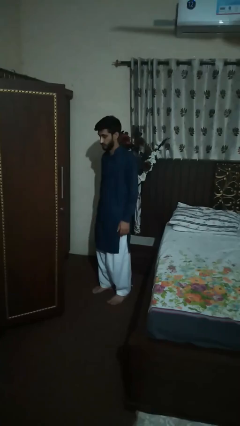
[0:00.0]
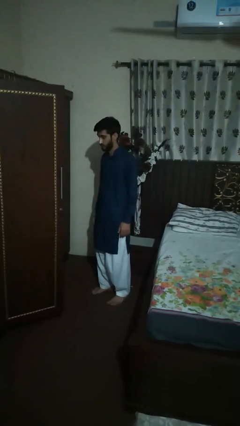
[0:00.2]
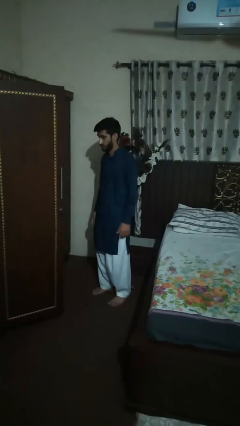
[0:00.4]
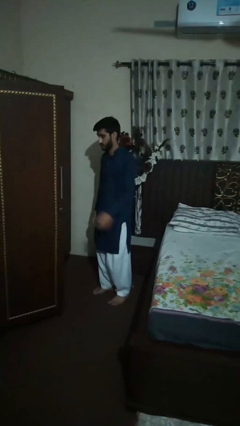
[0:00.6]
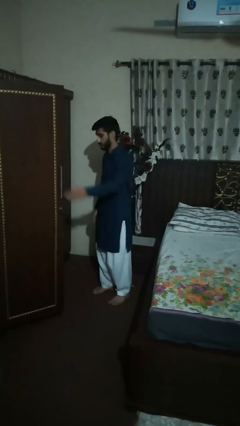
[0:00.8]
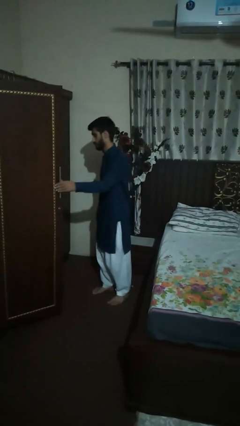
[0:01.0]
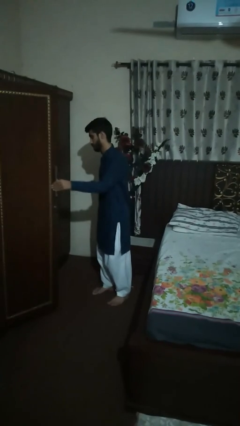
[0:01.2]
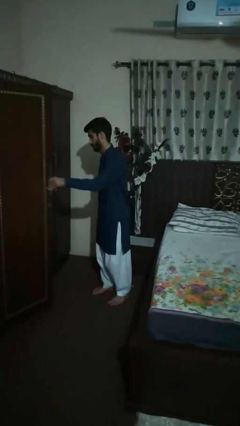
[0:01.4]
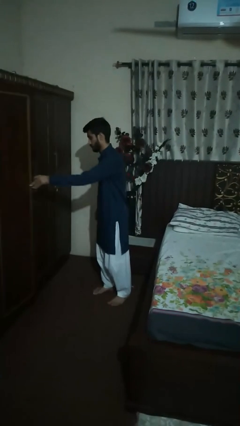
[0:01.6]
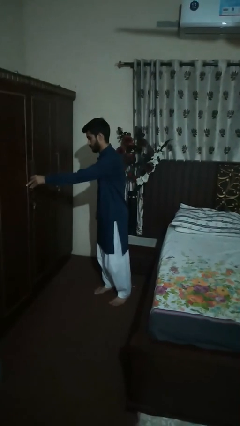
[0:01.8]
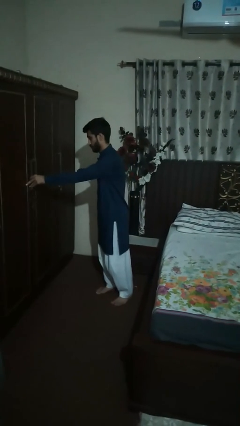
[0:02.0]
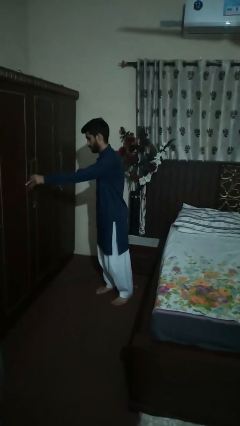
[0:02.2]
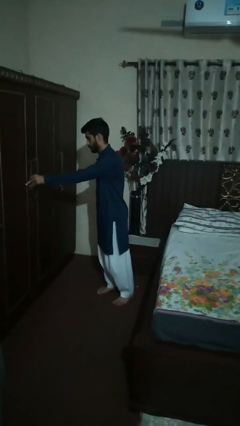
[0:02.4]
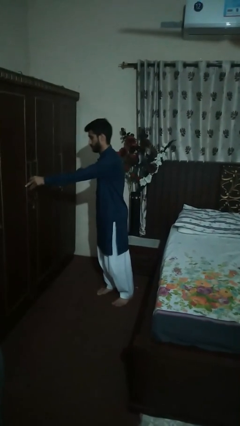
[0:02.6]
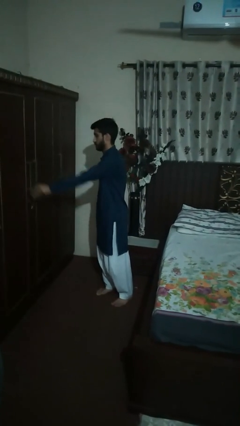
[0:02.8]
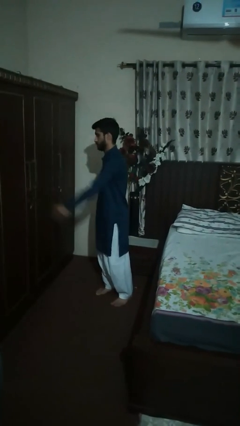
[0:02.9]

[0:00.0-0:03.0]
person closes dresser drawer

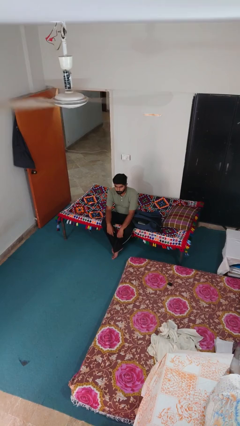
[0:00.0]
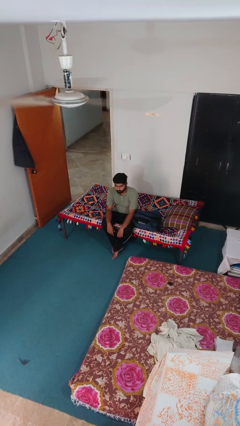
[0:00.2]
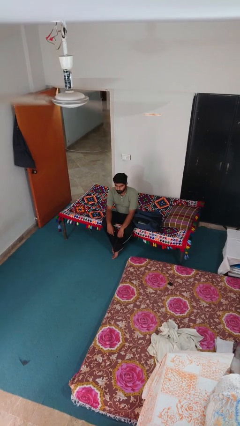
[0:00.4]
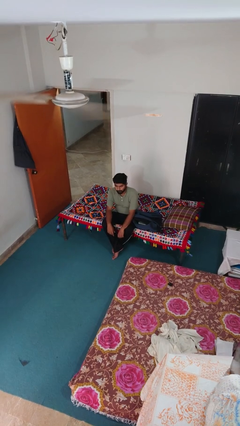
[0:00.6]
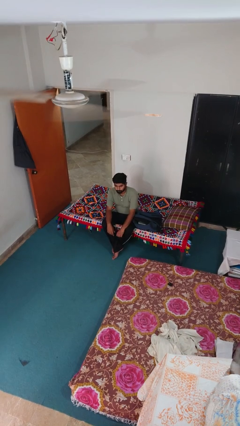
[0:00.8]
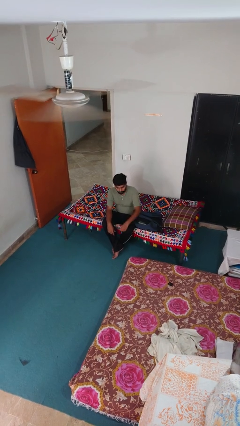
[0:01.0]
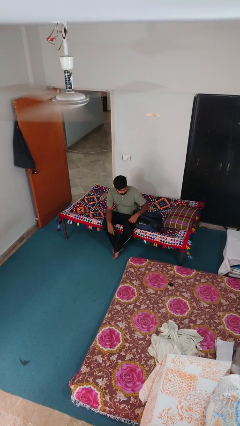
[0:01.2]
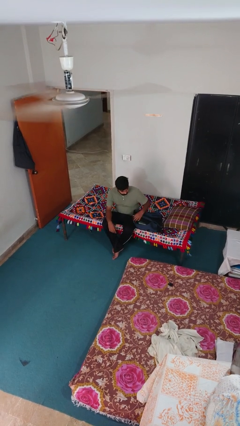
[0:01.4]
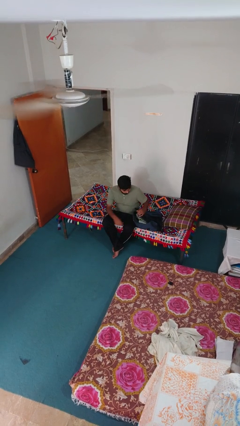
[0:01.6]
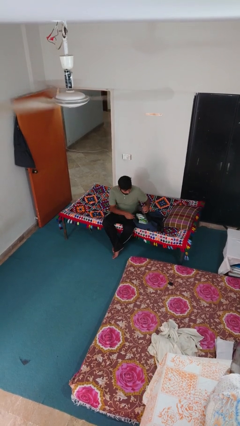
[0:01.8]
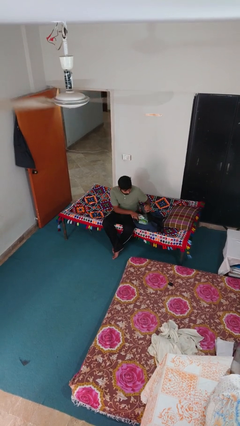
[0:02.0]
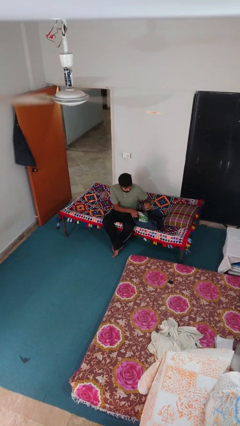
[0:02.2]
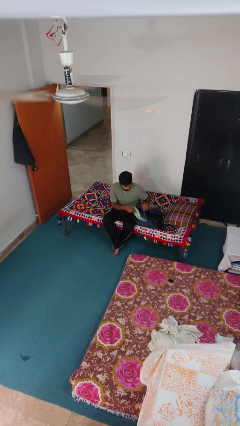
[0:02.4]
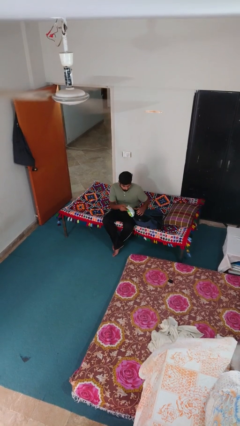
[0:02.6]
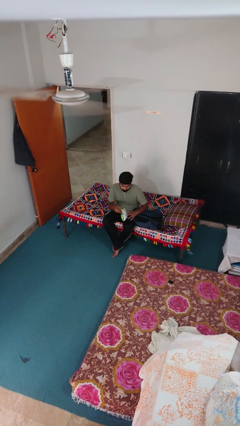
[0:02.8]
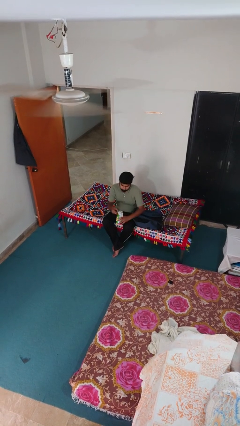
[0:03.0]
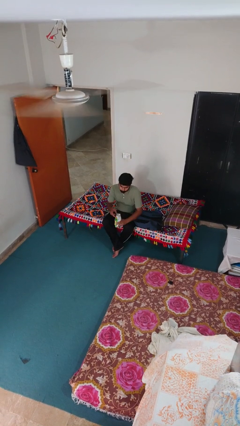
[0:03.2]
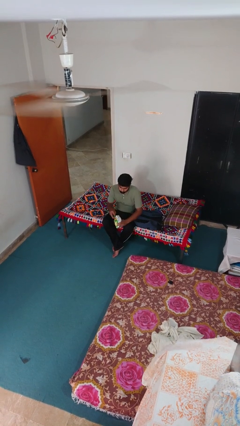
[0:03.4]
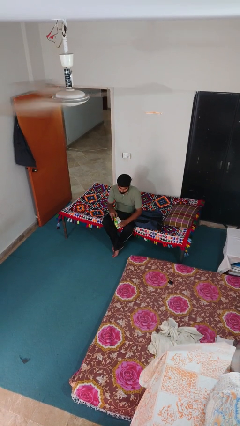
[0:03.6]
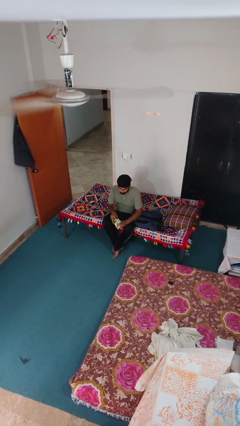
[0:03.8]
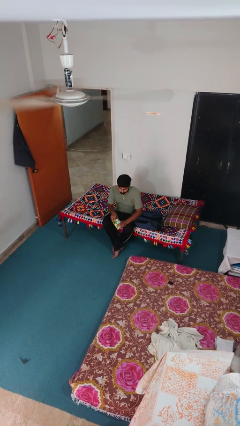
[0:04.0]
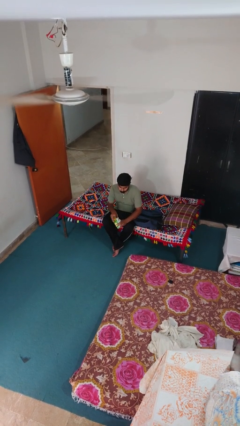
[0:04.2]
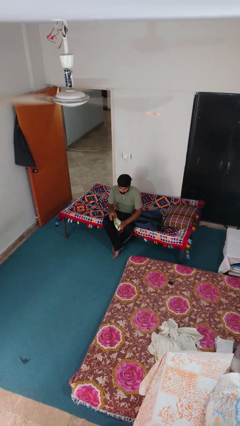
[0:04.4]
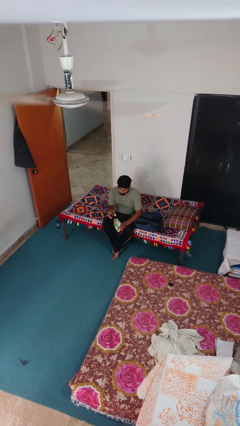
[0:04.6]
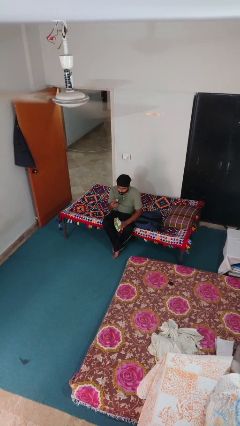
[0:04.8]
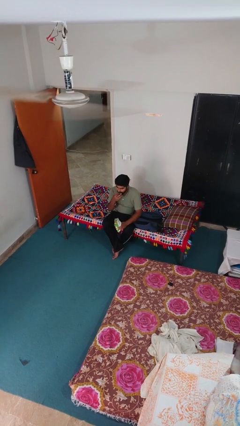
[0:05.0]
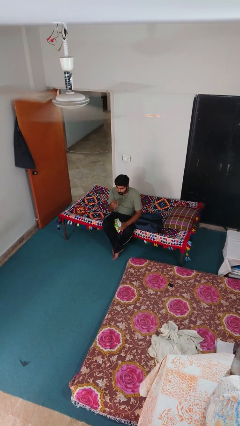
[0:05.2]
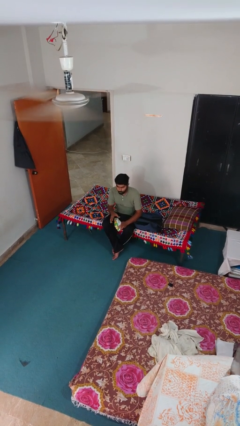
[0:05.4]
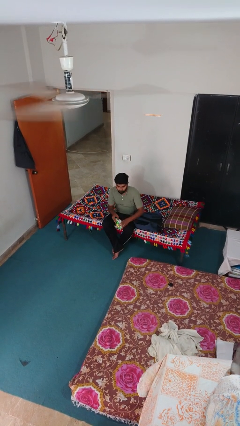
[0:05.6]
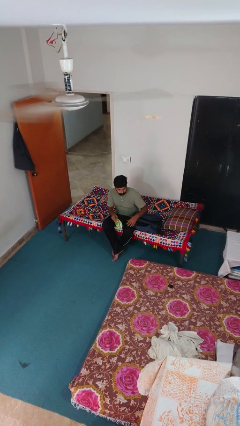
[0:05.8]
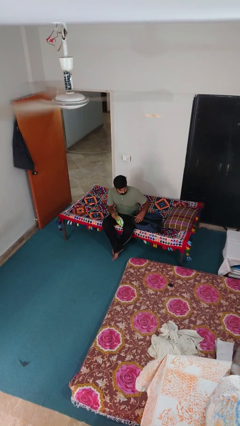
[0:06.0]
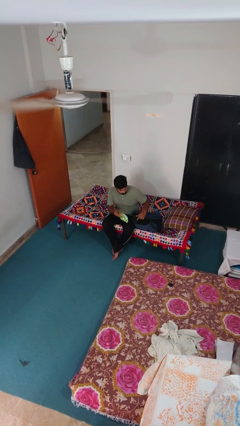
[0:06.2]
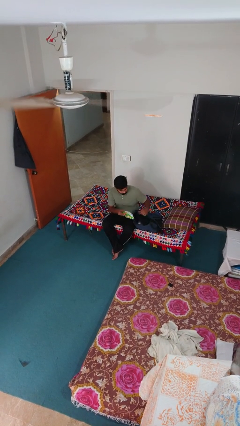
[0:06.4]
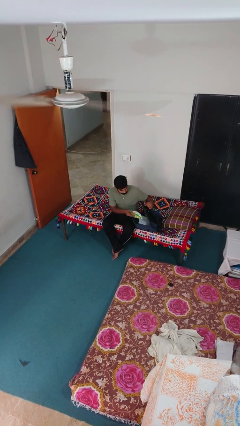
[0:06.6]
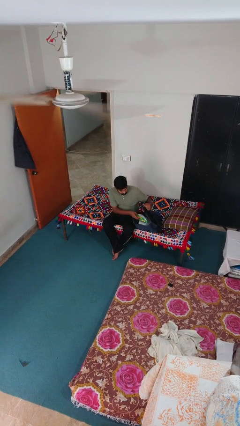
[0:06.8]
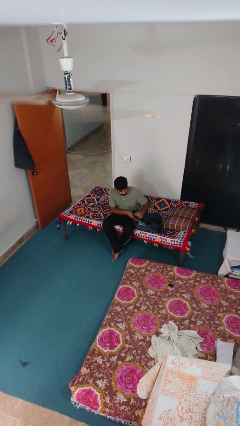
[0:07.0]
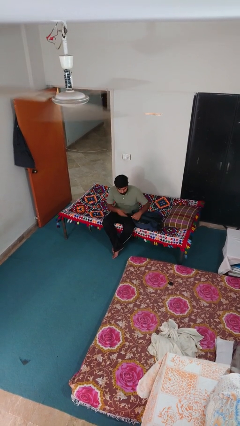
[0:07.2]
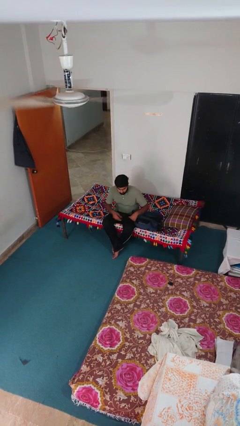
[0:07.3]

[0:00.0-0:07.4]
person eats snack from bag

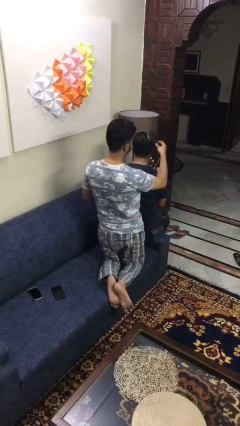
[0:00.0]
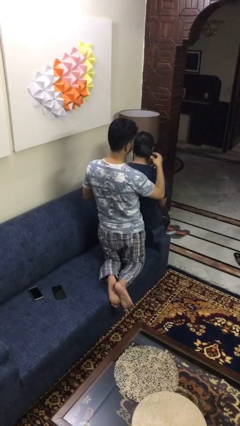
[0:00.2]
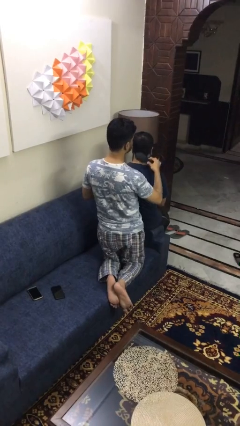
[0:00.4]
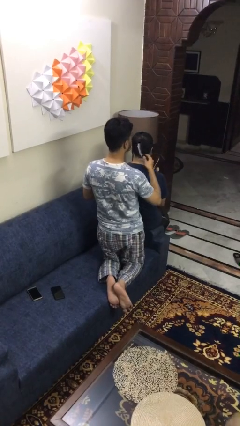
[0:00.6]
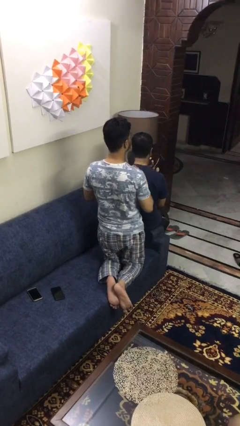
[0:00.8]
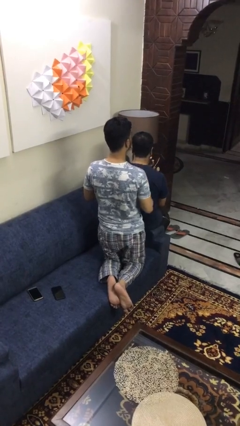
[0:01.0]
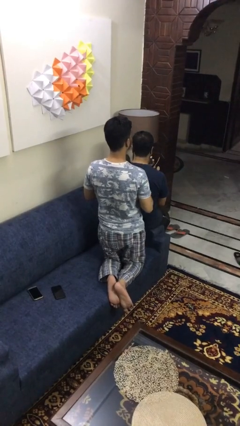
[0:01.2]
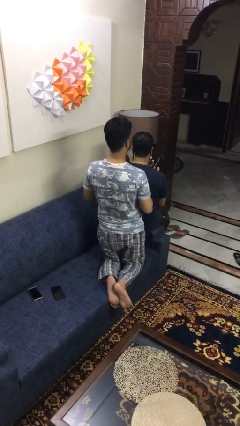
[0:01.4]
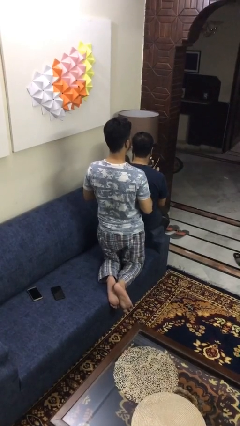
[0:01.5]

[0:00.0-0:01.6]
person brushes hair of person

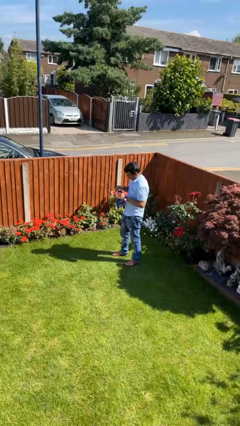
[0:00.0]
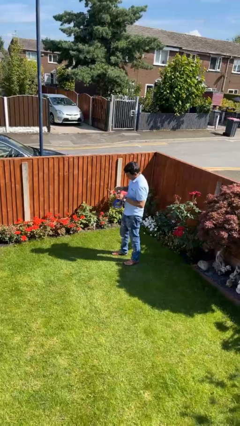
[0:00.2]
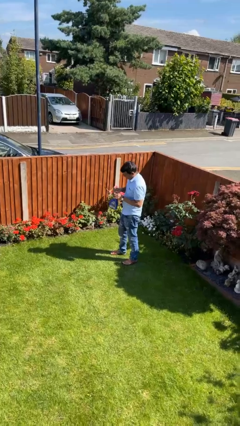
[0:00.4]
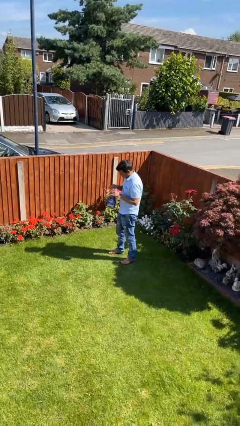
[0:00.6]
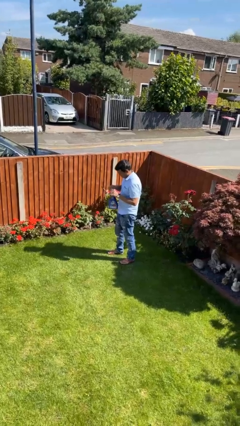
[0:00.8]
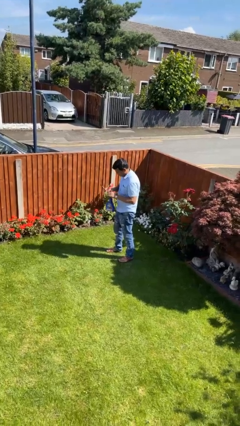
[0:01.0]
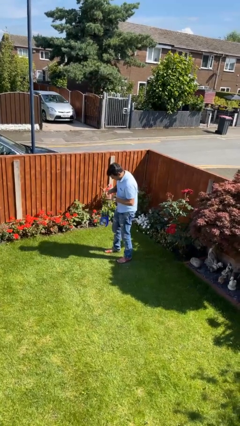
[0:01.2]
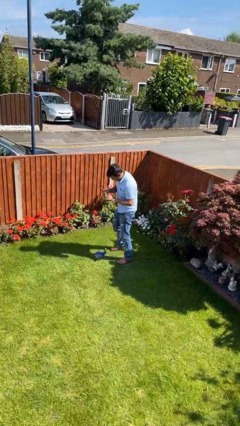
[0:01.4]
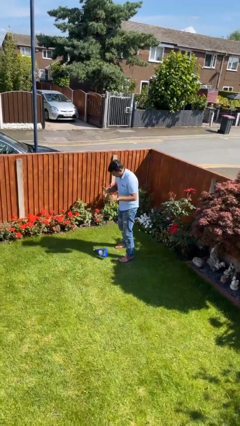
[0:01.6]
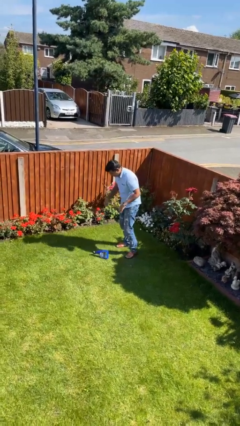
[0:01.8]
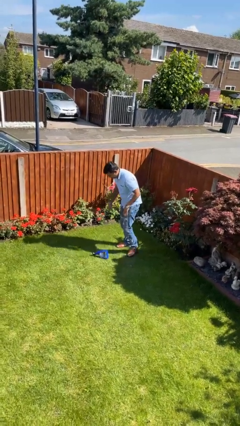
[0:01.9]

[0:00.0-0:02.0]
person drops object

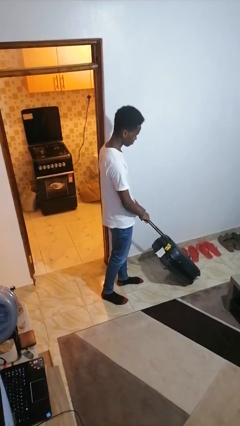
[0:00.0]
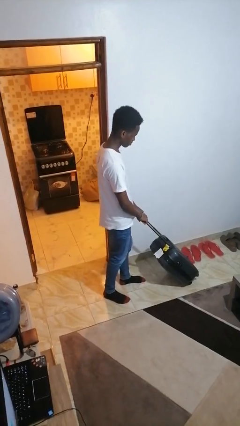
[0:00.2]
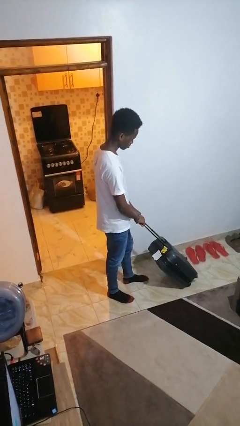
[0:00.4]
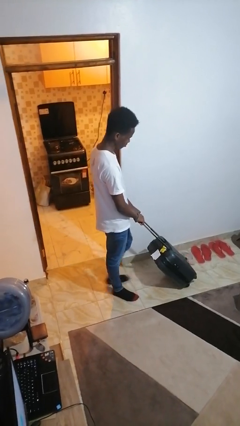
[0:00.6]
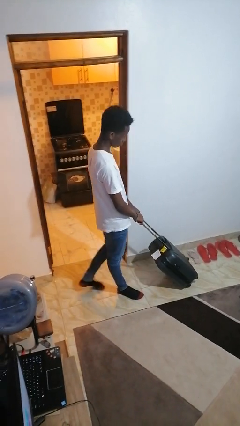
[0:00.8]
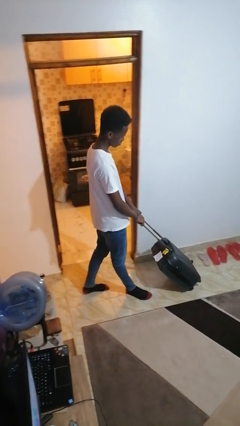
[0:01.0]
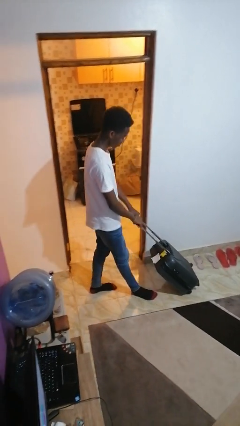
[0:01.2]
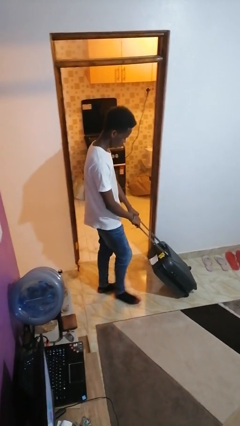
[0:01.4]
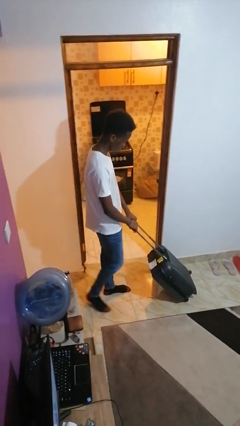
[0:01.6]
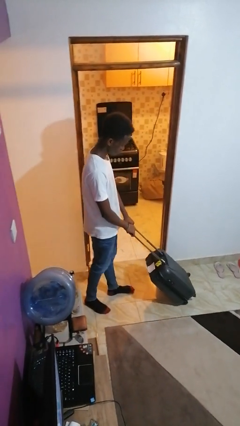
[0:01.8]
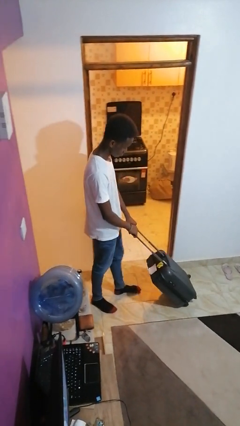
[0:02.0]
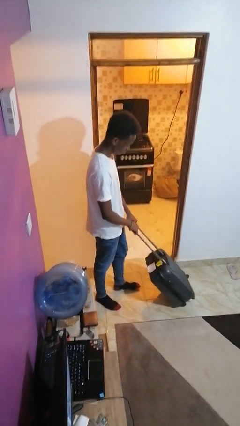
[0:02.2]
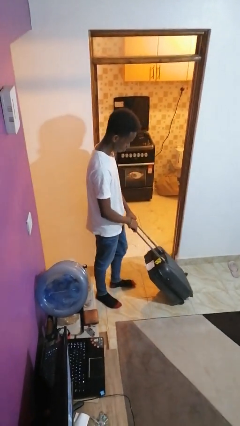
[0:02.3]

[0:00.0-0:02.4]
person pulls wheeled cart

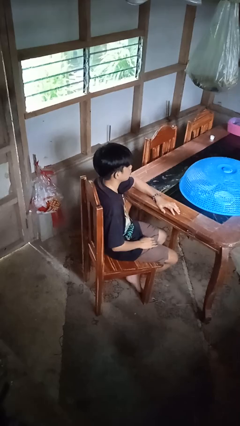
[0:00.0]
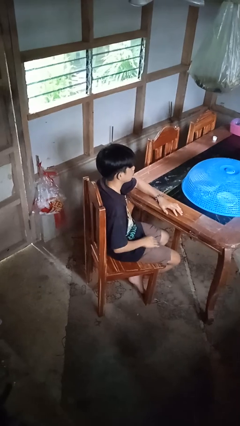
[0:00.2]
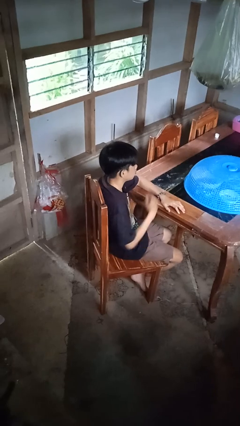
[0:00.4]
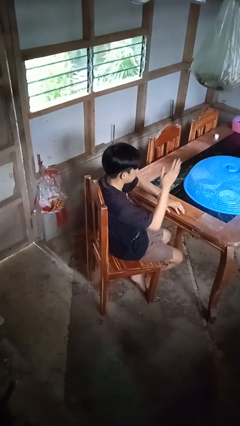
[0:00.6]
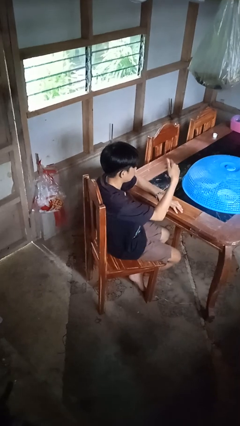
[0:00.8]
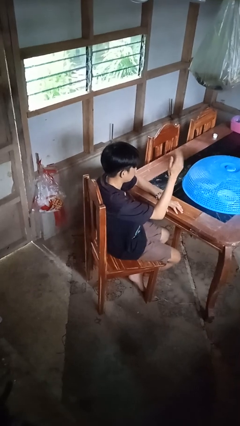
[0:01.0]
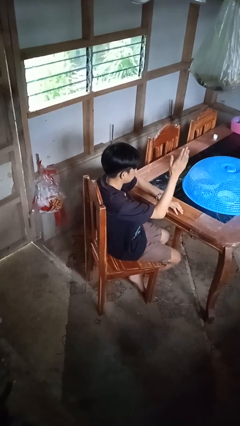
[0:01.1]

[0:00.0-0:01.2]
person gestures come here
